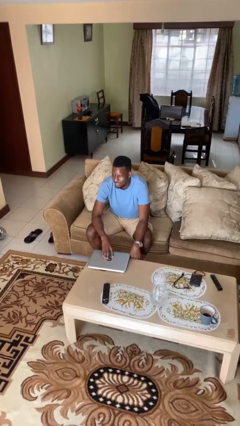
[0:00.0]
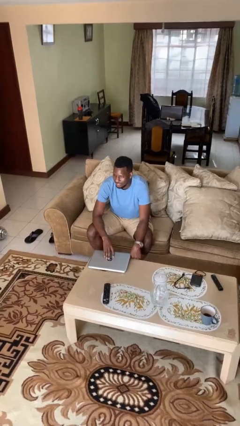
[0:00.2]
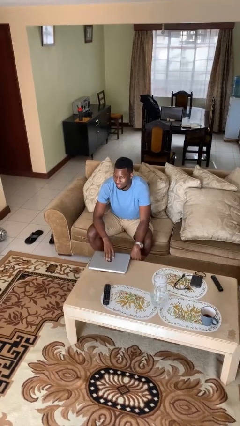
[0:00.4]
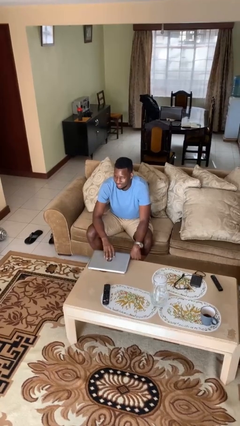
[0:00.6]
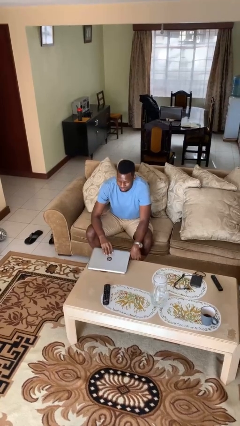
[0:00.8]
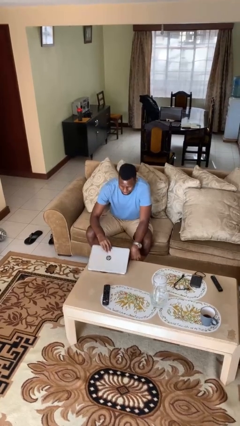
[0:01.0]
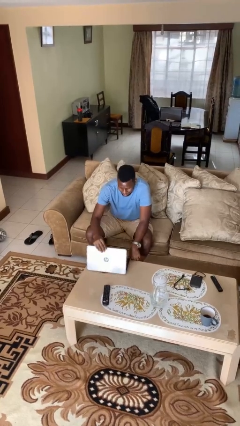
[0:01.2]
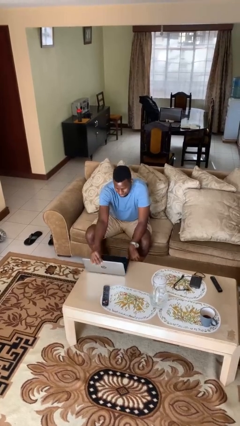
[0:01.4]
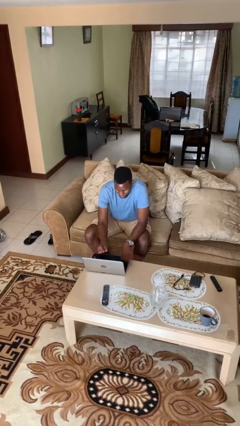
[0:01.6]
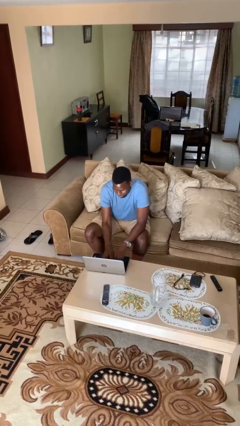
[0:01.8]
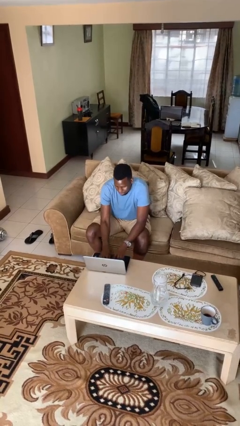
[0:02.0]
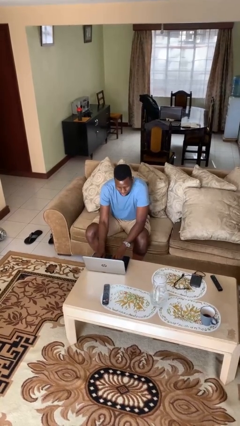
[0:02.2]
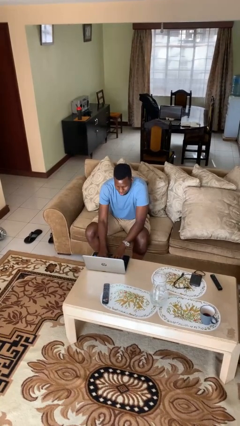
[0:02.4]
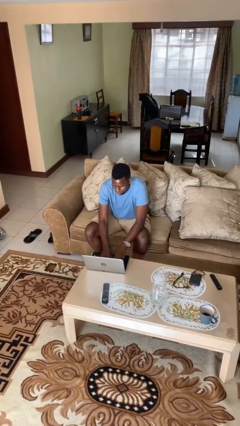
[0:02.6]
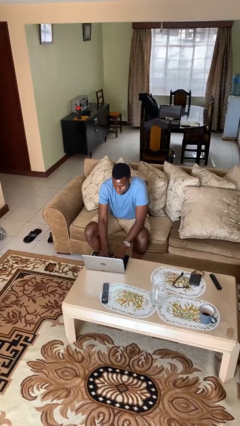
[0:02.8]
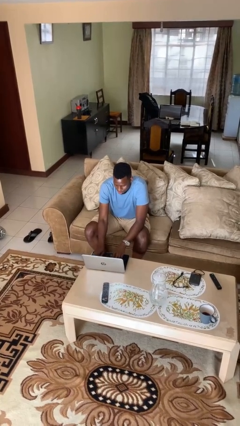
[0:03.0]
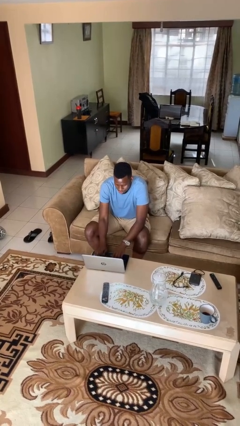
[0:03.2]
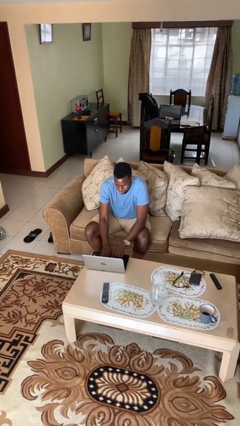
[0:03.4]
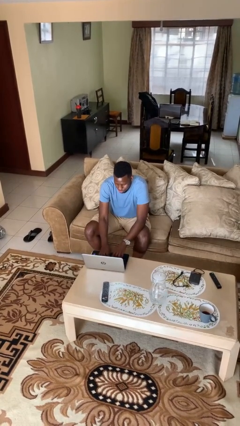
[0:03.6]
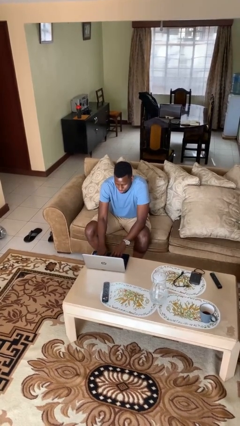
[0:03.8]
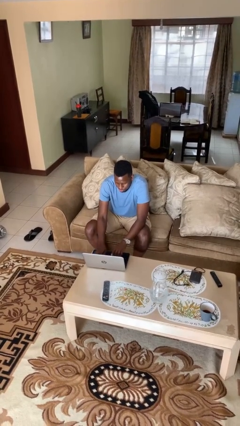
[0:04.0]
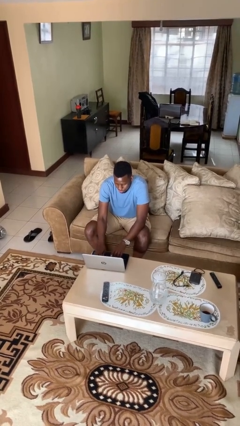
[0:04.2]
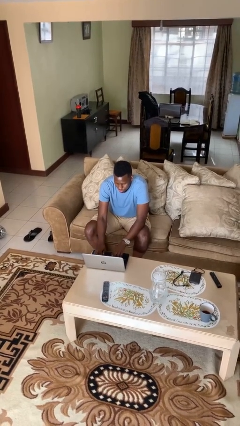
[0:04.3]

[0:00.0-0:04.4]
person interacts with laptop

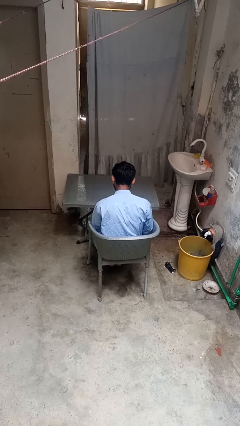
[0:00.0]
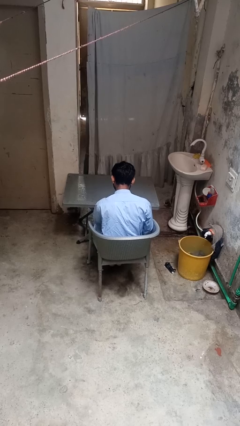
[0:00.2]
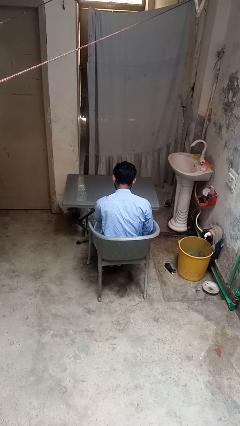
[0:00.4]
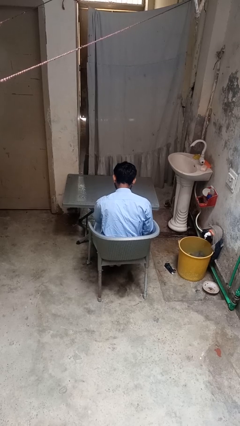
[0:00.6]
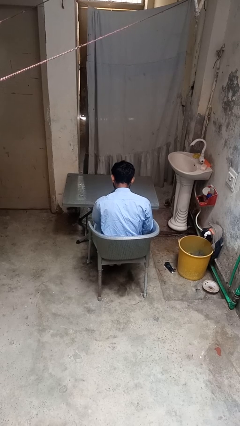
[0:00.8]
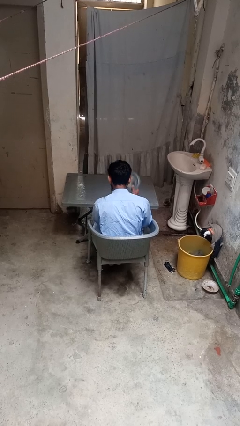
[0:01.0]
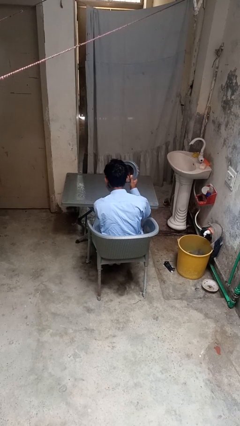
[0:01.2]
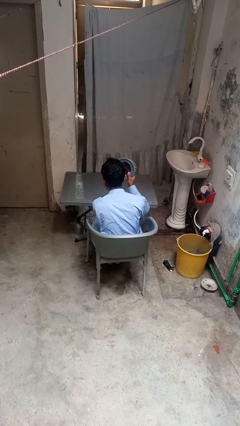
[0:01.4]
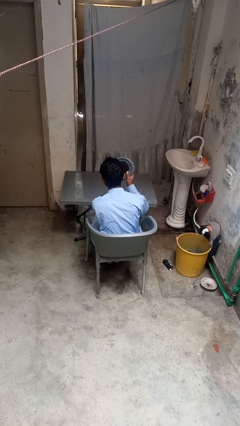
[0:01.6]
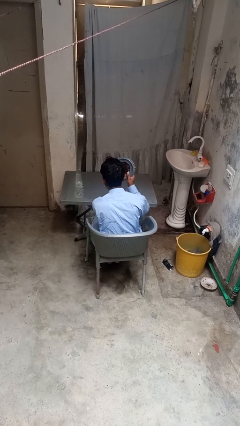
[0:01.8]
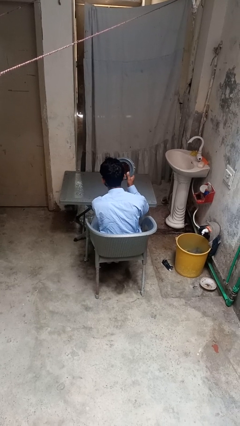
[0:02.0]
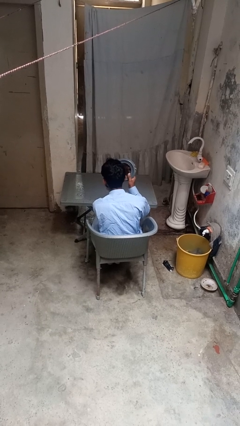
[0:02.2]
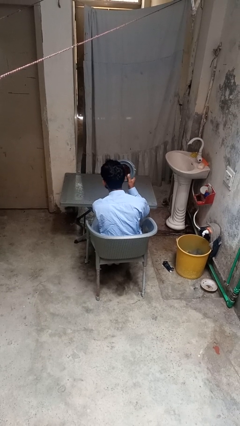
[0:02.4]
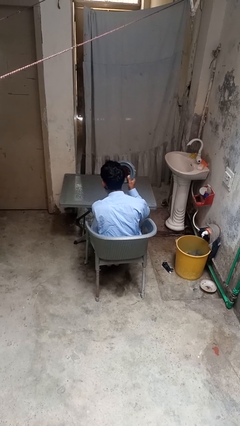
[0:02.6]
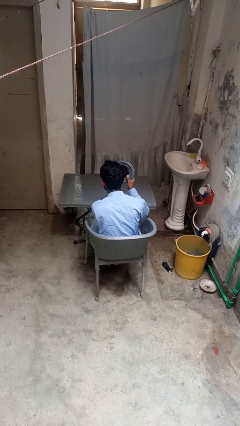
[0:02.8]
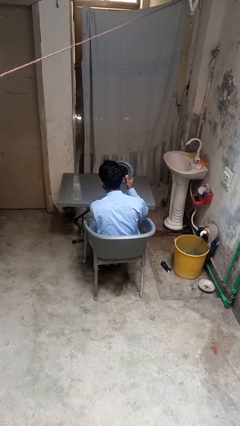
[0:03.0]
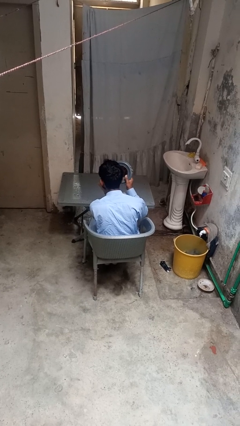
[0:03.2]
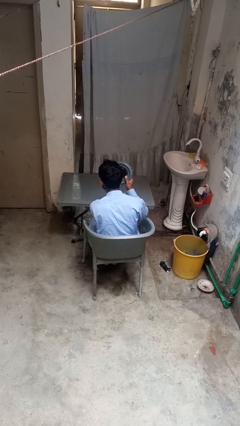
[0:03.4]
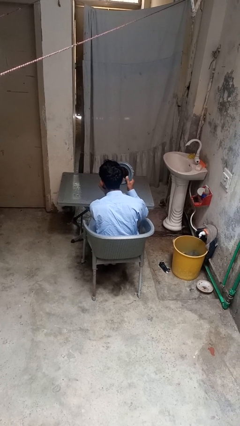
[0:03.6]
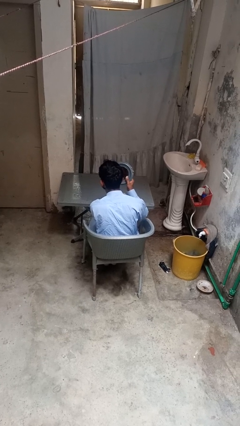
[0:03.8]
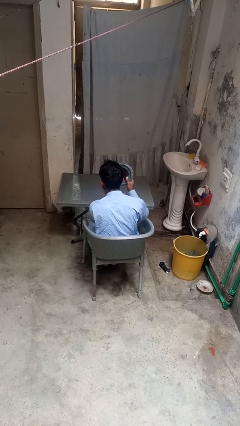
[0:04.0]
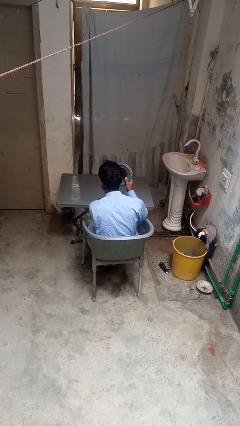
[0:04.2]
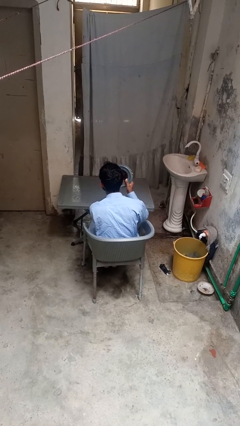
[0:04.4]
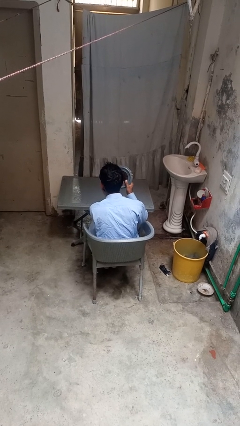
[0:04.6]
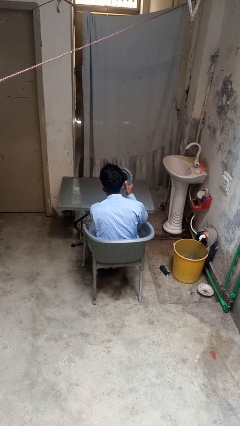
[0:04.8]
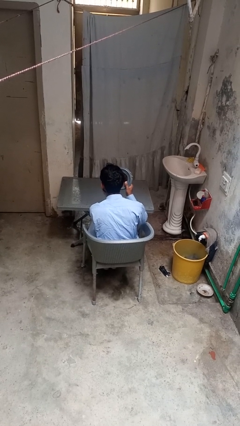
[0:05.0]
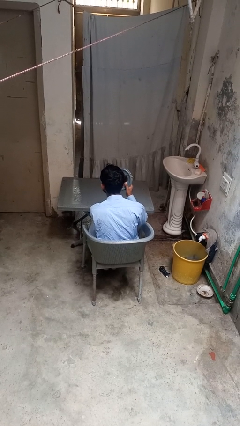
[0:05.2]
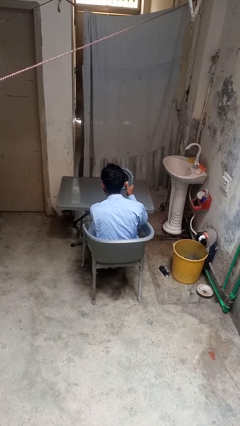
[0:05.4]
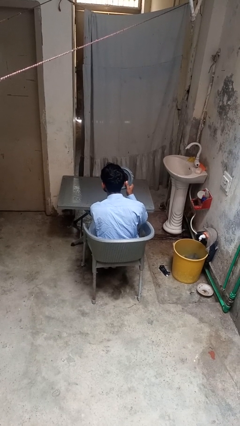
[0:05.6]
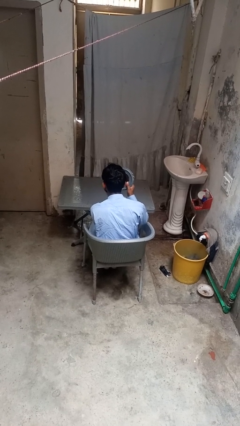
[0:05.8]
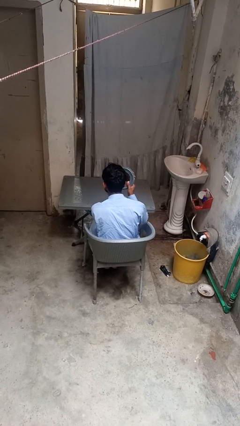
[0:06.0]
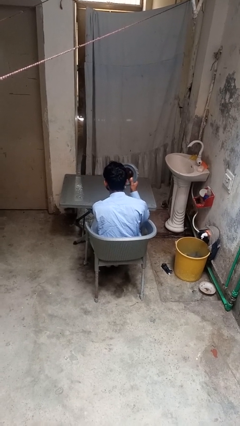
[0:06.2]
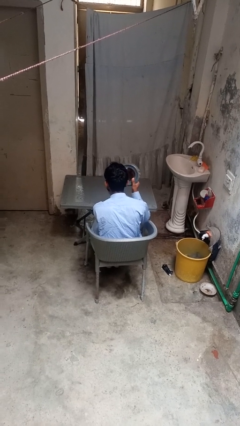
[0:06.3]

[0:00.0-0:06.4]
person applies foundation makeup

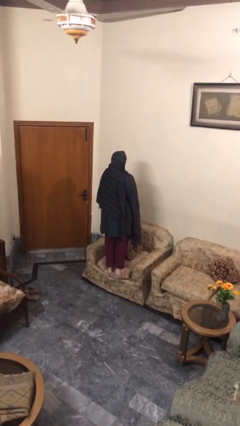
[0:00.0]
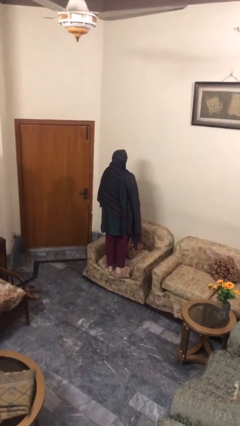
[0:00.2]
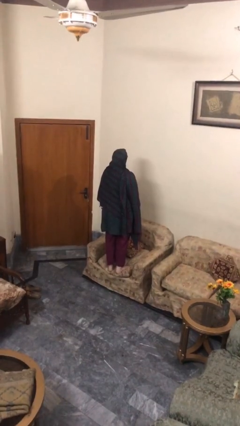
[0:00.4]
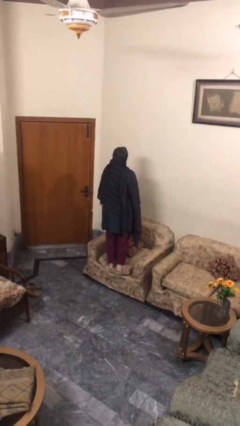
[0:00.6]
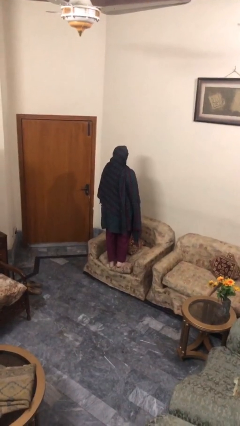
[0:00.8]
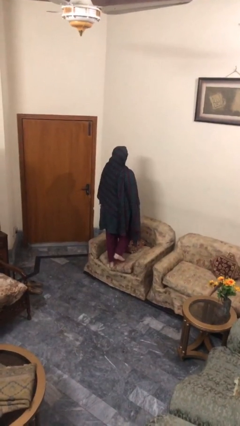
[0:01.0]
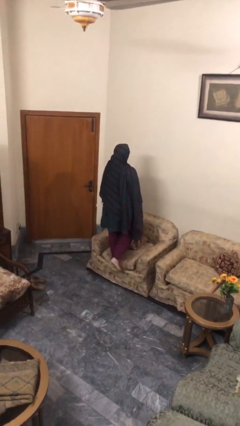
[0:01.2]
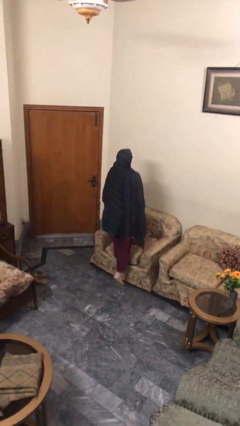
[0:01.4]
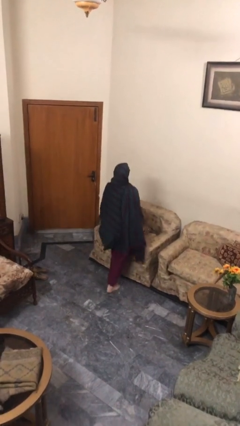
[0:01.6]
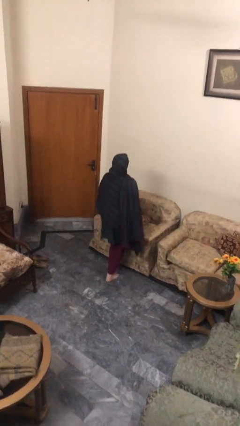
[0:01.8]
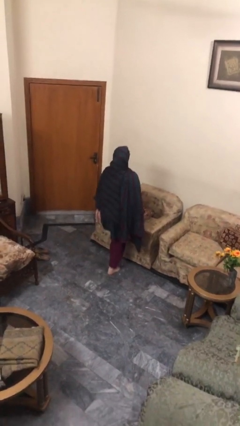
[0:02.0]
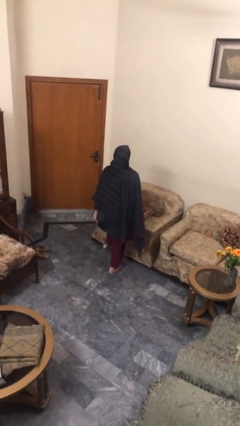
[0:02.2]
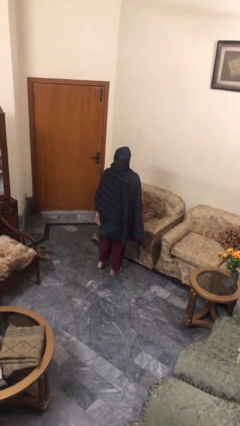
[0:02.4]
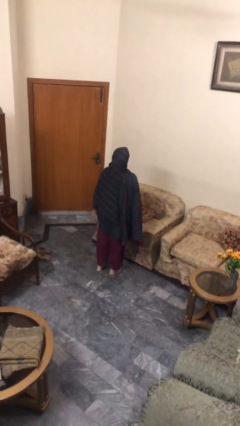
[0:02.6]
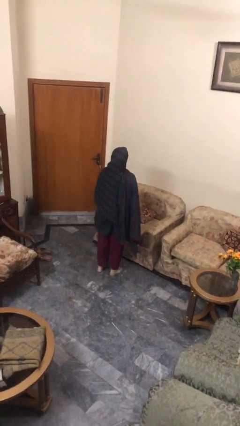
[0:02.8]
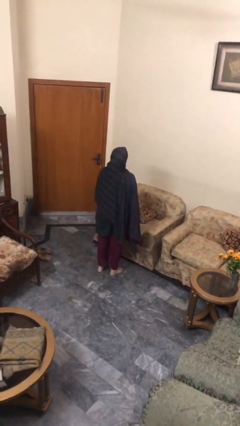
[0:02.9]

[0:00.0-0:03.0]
person climbs off couch

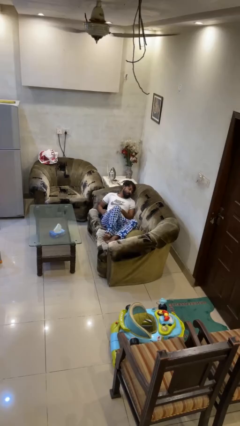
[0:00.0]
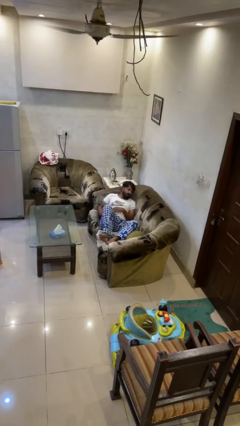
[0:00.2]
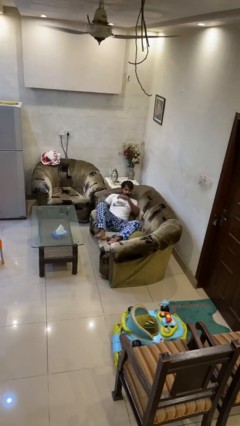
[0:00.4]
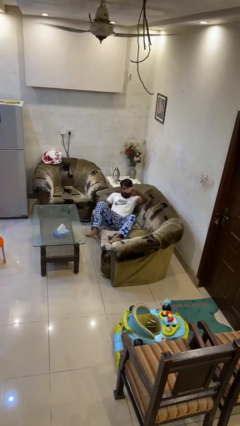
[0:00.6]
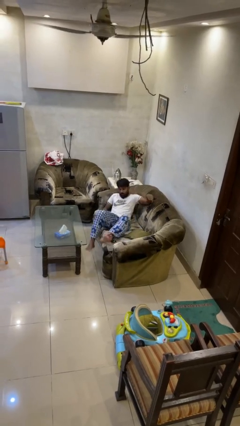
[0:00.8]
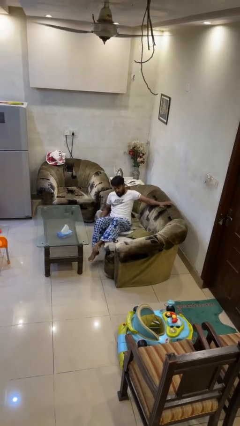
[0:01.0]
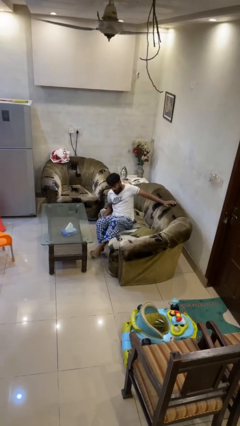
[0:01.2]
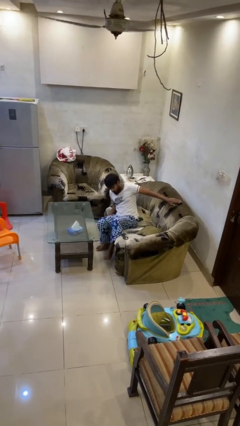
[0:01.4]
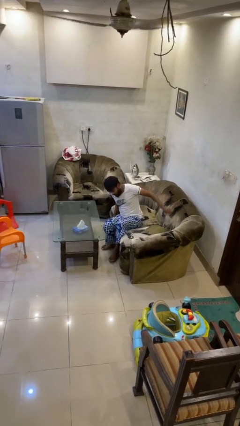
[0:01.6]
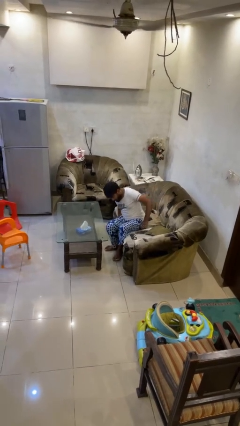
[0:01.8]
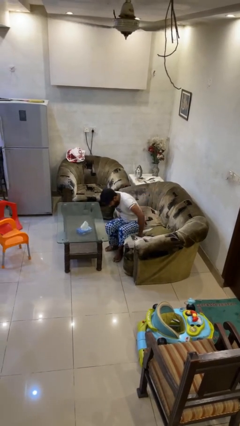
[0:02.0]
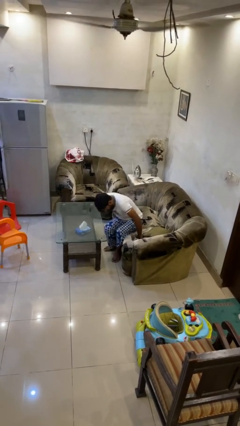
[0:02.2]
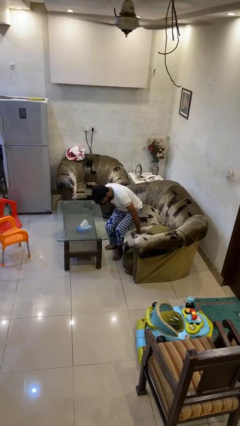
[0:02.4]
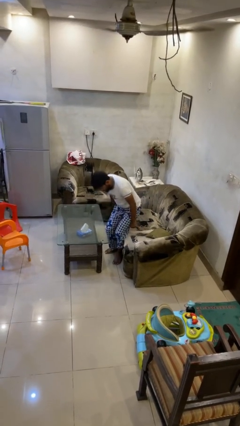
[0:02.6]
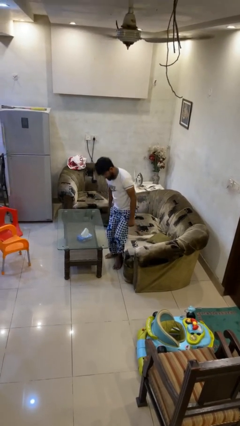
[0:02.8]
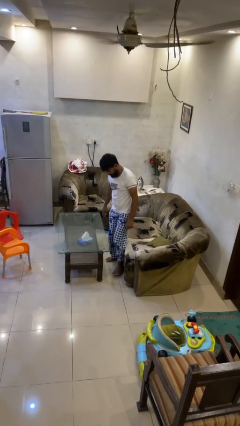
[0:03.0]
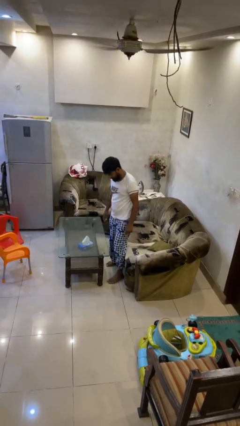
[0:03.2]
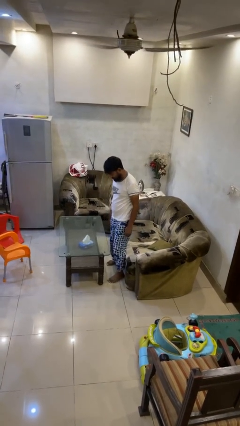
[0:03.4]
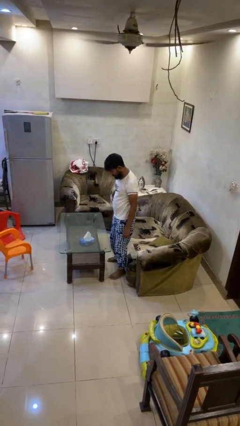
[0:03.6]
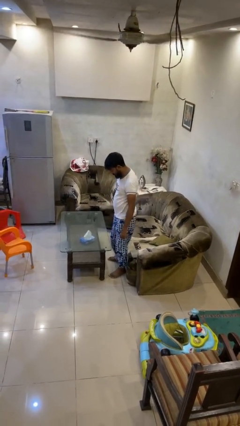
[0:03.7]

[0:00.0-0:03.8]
person stands up

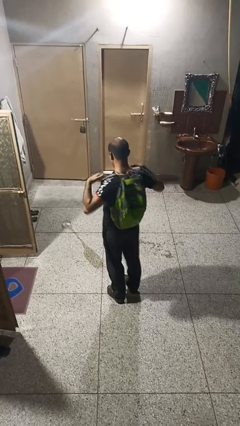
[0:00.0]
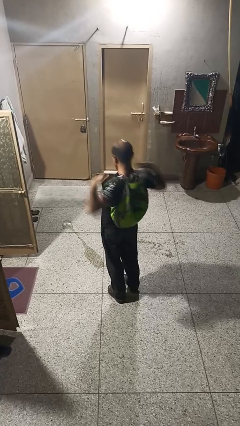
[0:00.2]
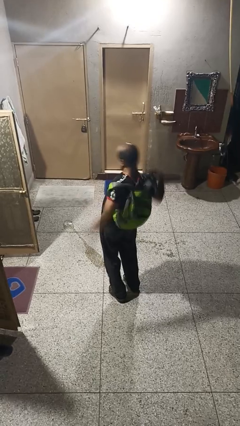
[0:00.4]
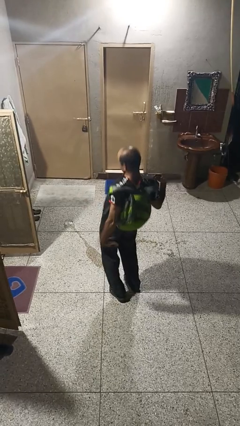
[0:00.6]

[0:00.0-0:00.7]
person takes off backpack
